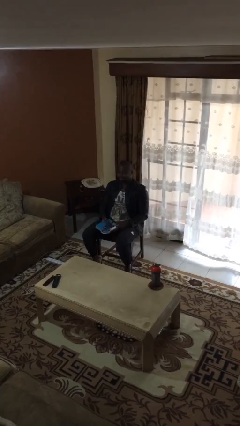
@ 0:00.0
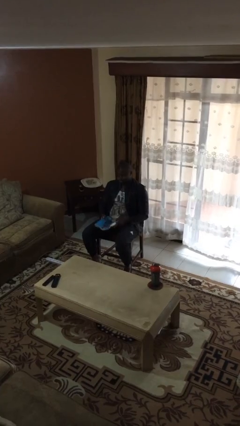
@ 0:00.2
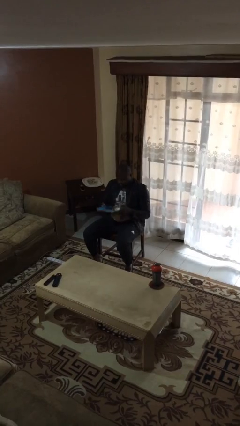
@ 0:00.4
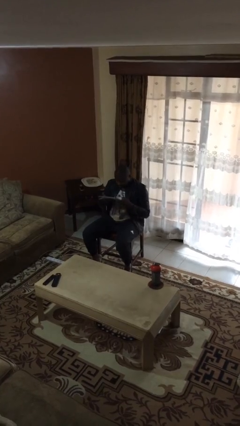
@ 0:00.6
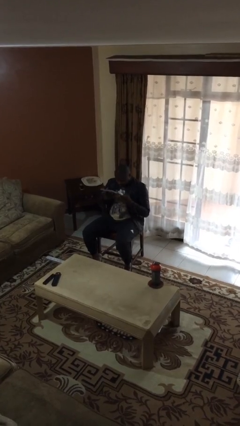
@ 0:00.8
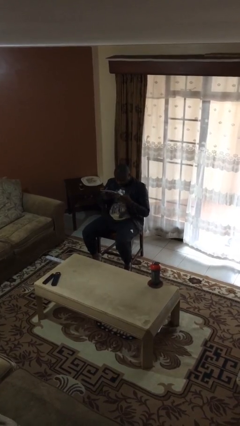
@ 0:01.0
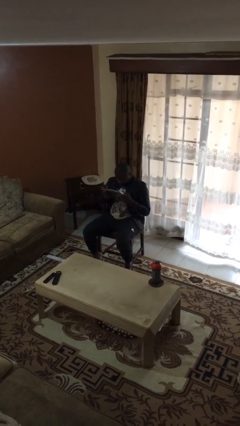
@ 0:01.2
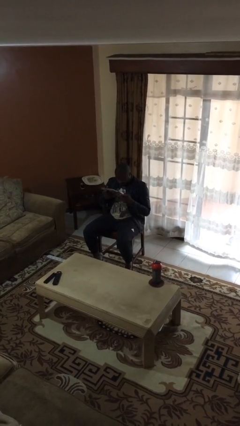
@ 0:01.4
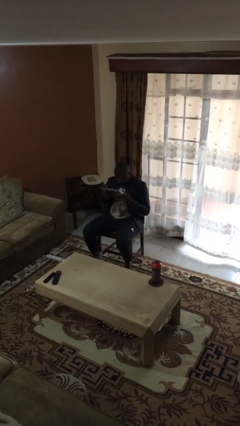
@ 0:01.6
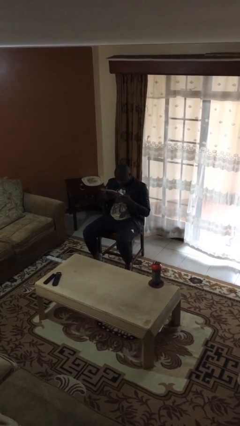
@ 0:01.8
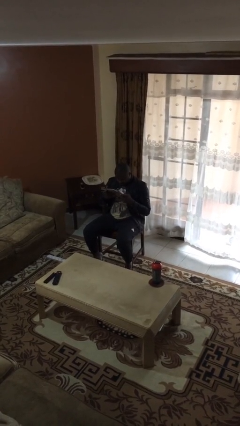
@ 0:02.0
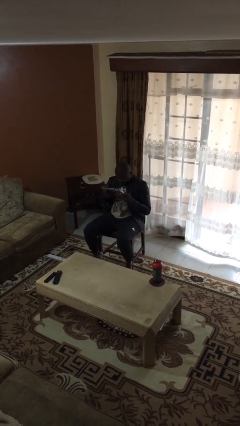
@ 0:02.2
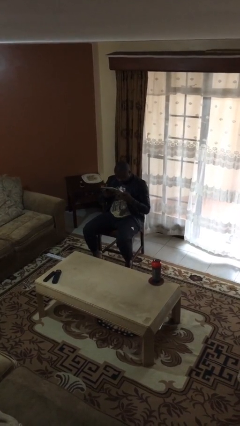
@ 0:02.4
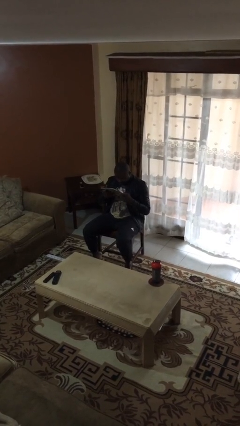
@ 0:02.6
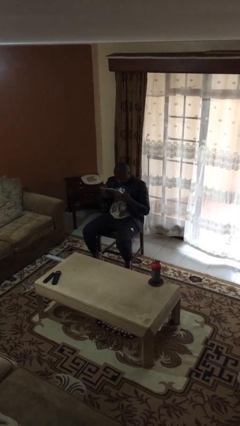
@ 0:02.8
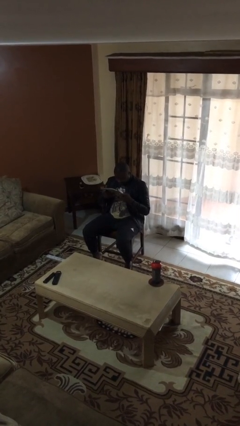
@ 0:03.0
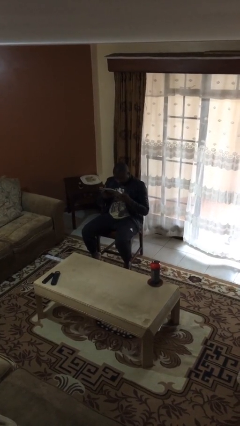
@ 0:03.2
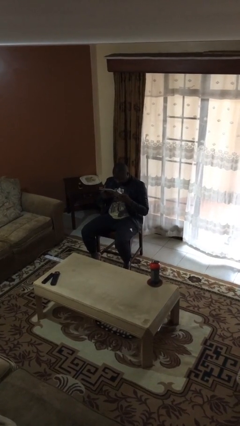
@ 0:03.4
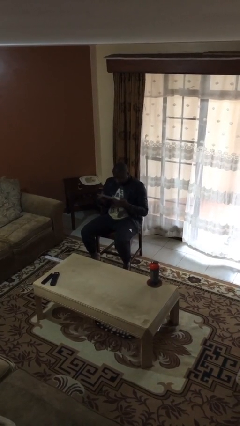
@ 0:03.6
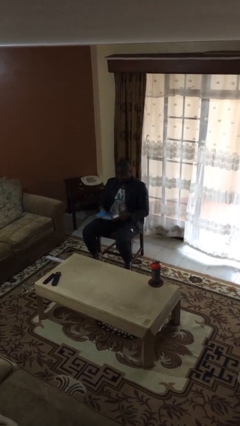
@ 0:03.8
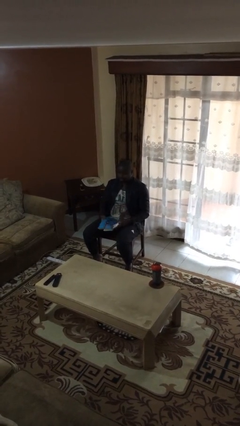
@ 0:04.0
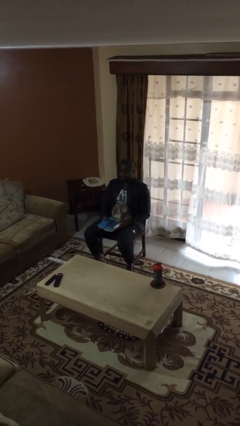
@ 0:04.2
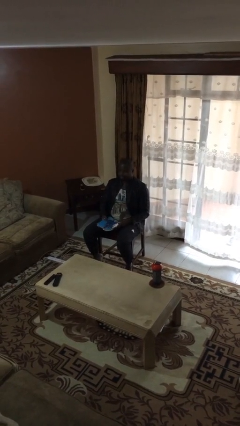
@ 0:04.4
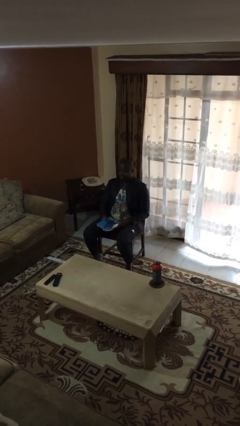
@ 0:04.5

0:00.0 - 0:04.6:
person reads document

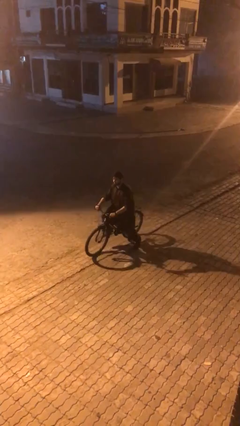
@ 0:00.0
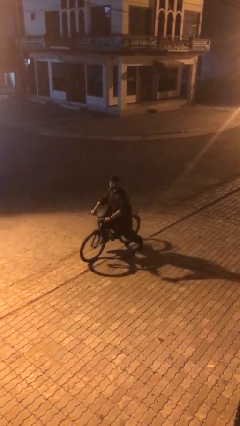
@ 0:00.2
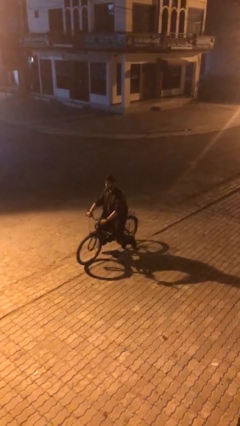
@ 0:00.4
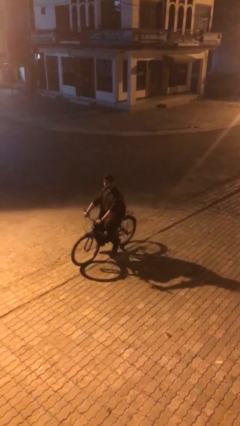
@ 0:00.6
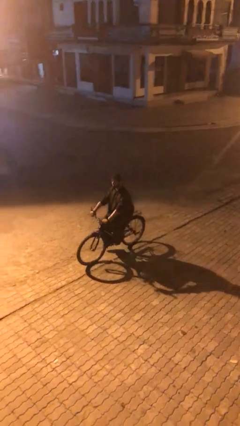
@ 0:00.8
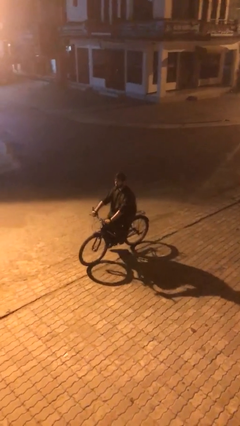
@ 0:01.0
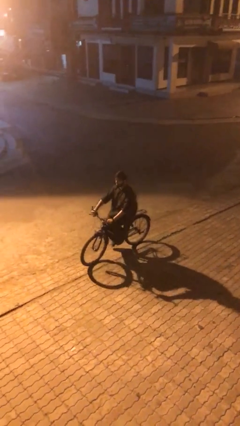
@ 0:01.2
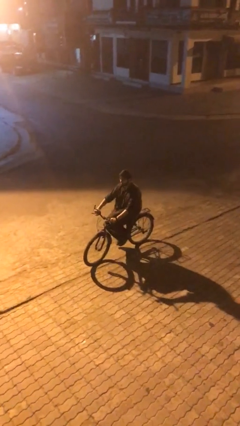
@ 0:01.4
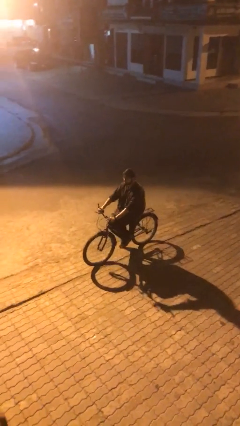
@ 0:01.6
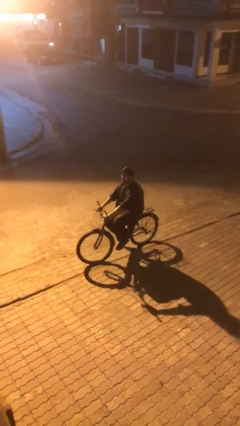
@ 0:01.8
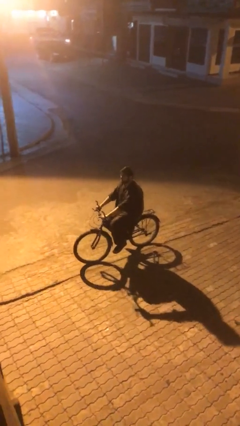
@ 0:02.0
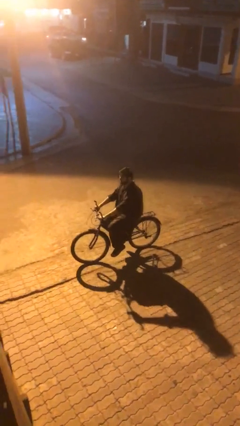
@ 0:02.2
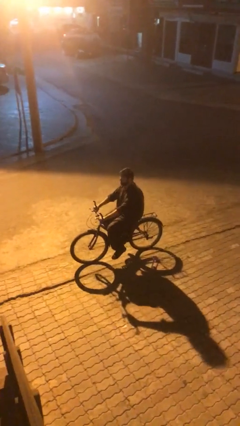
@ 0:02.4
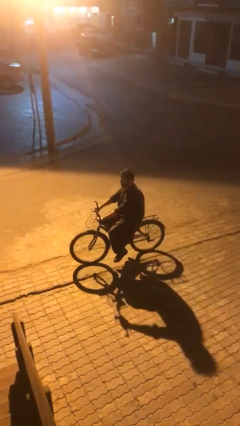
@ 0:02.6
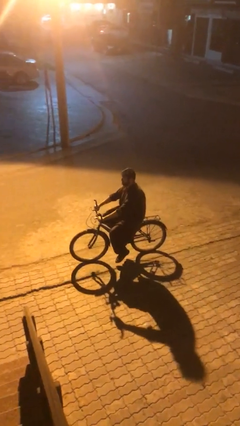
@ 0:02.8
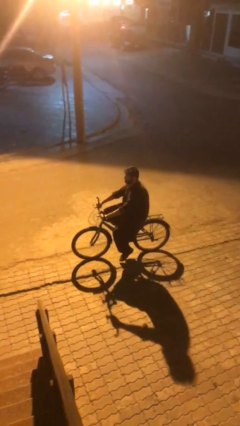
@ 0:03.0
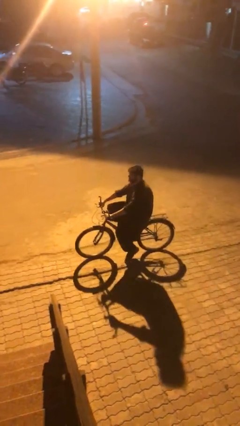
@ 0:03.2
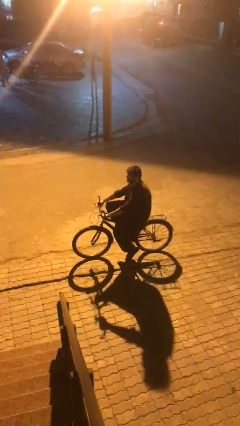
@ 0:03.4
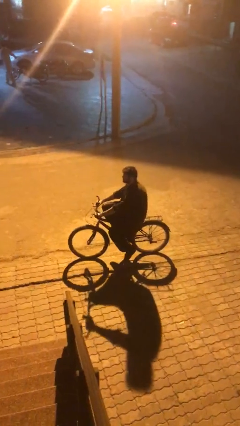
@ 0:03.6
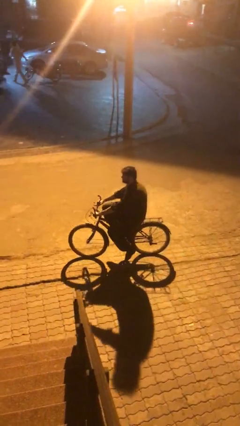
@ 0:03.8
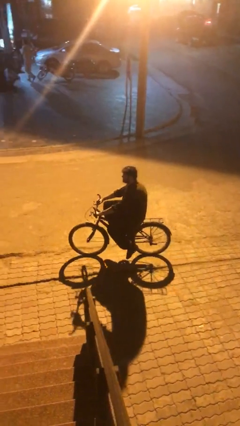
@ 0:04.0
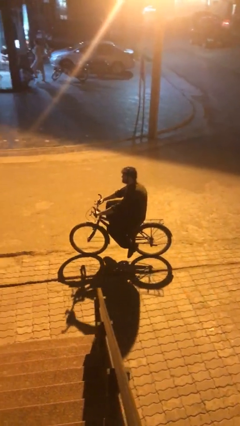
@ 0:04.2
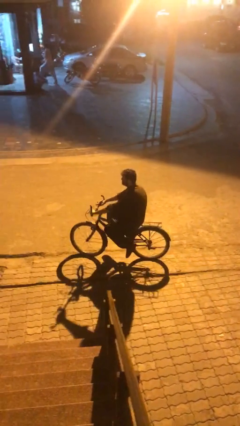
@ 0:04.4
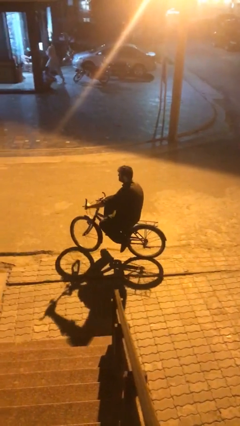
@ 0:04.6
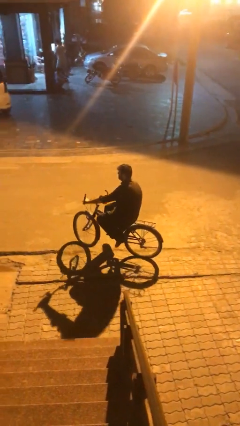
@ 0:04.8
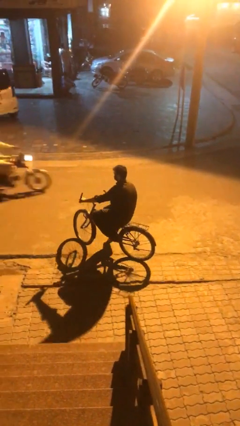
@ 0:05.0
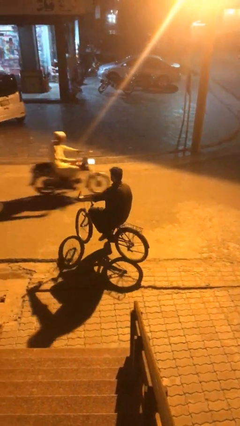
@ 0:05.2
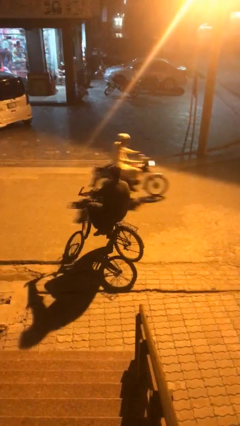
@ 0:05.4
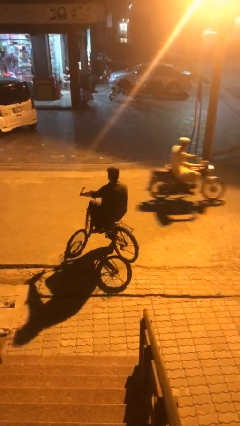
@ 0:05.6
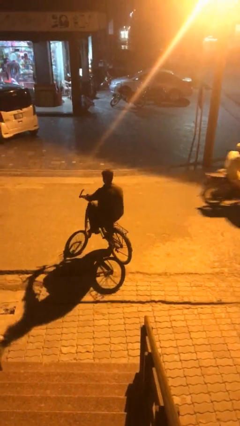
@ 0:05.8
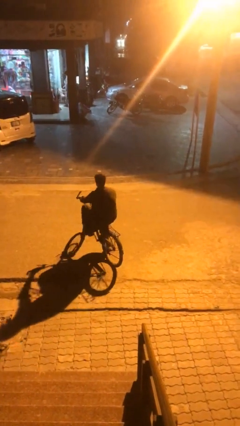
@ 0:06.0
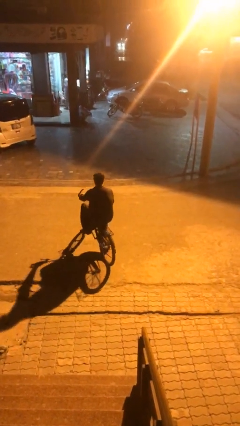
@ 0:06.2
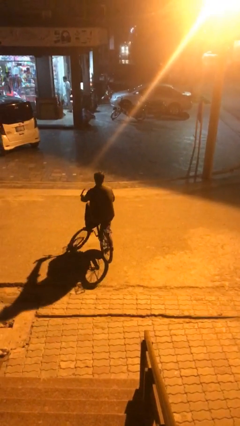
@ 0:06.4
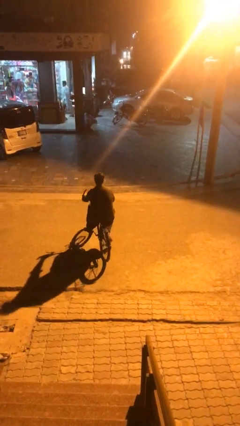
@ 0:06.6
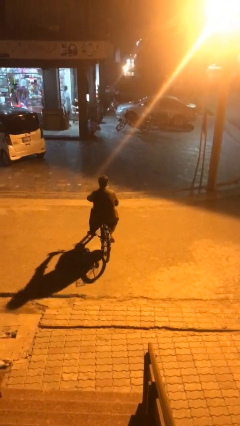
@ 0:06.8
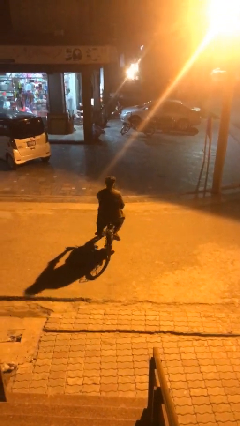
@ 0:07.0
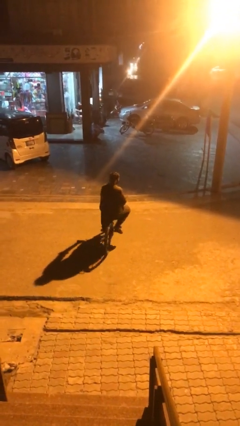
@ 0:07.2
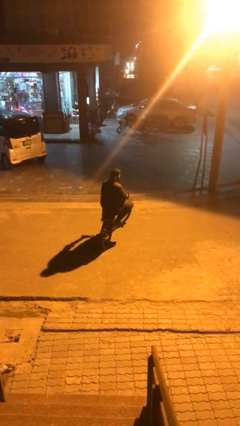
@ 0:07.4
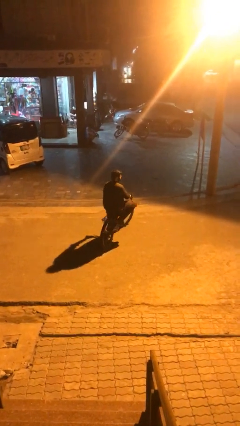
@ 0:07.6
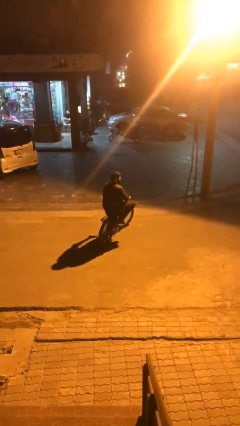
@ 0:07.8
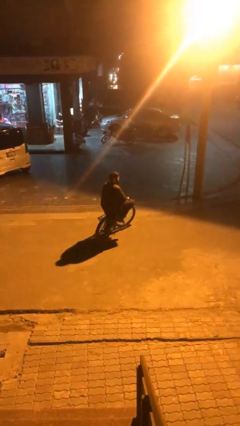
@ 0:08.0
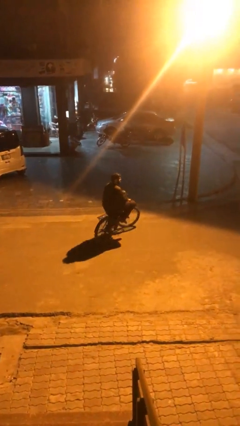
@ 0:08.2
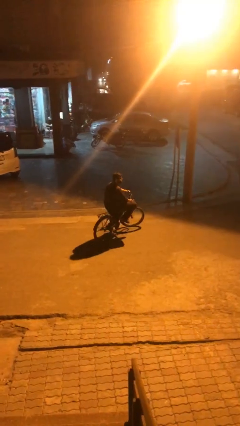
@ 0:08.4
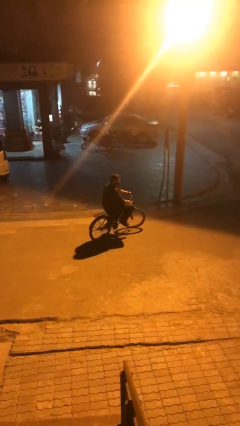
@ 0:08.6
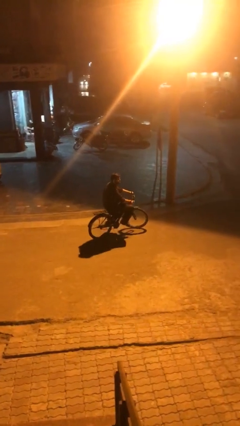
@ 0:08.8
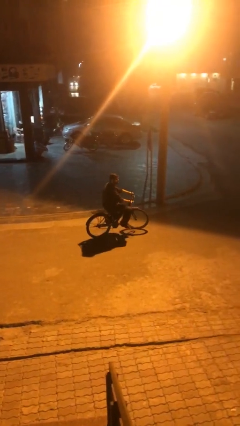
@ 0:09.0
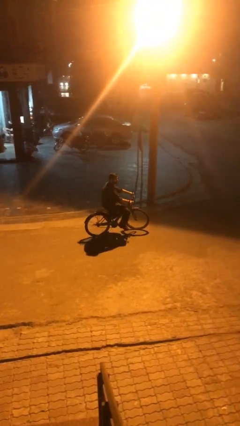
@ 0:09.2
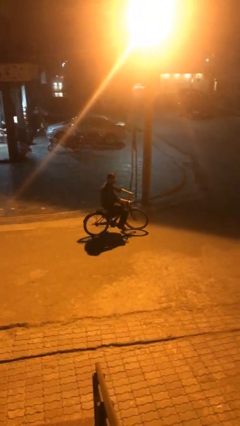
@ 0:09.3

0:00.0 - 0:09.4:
person rides bicycle

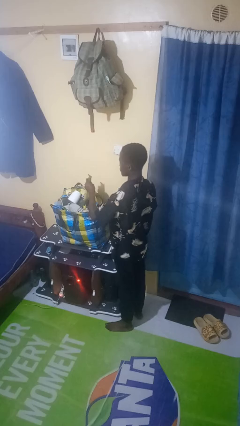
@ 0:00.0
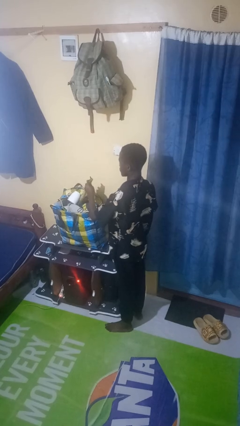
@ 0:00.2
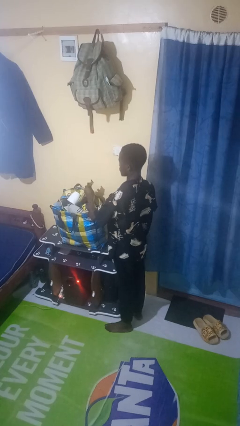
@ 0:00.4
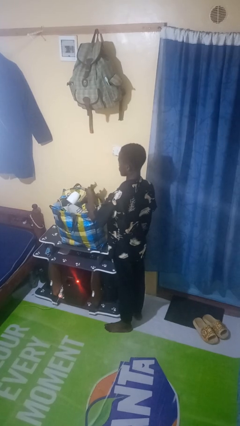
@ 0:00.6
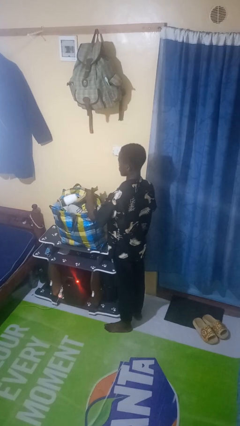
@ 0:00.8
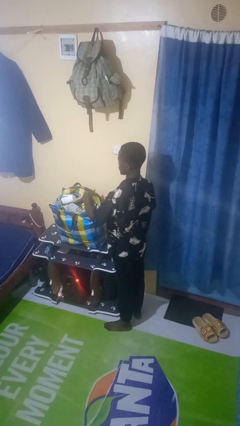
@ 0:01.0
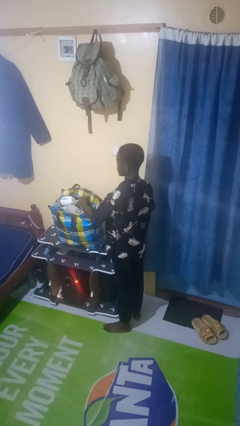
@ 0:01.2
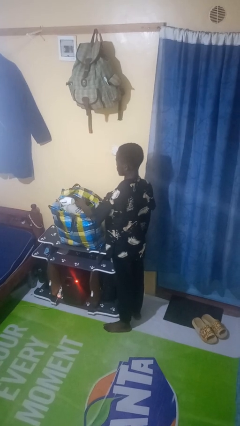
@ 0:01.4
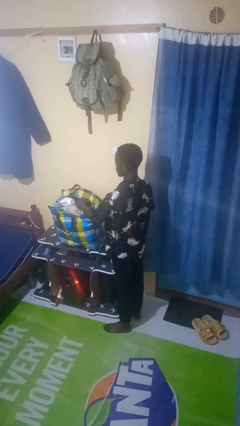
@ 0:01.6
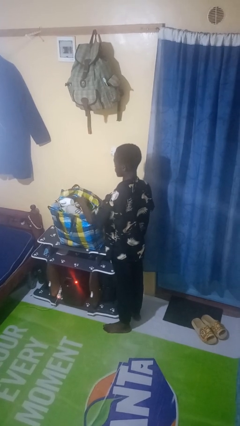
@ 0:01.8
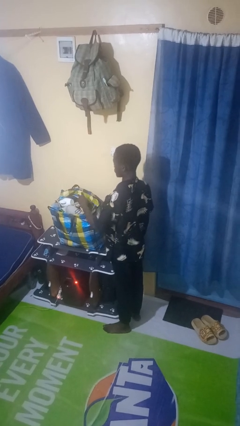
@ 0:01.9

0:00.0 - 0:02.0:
person puts object into bag

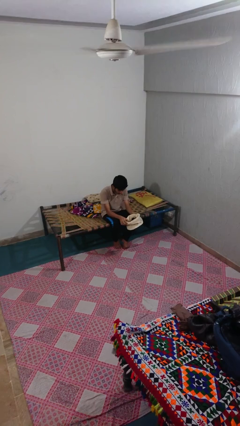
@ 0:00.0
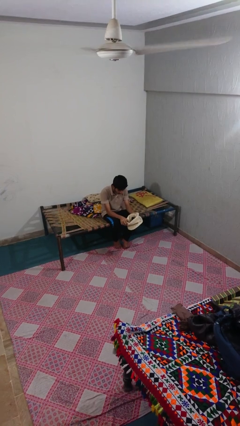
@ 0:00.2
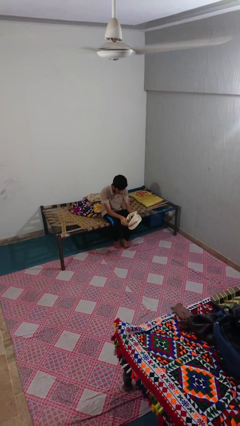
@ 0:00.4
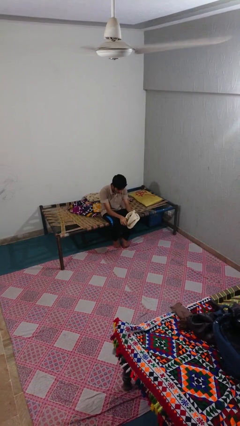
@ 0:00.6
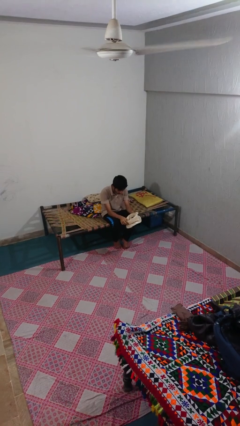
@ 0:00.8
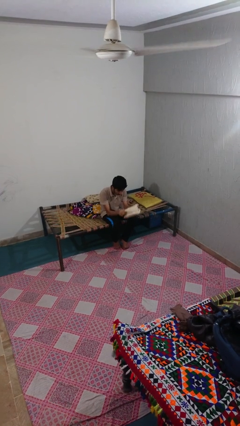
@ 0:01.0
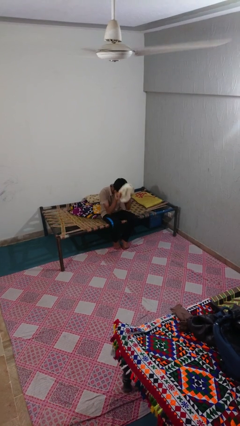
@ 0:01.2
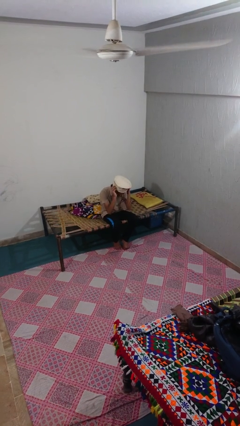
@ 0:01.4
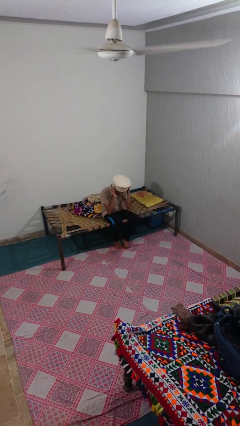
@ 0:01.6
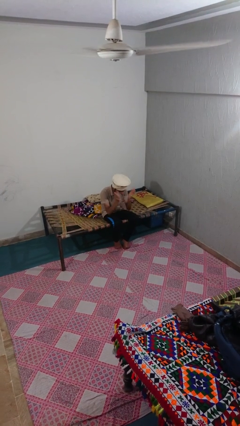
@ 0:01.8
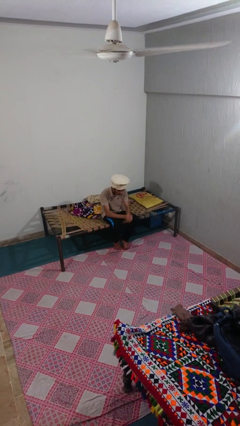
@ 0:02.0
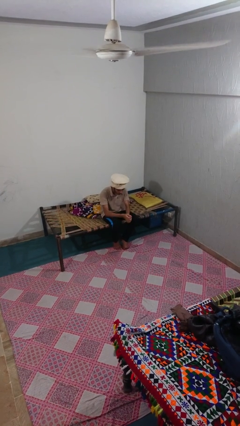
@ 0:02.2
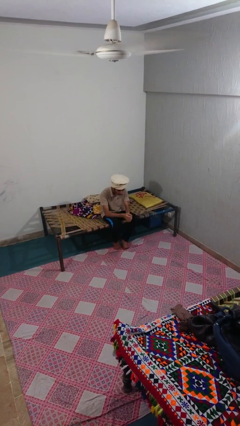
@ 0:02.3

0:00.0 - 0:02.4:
person puts on hat
